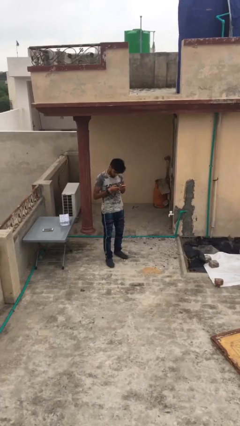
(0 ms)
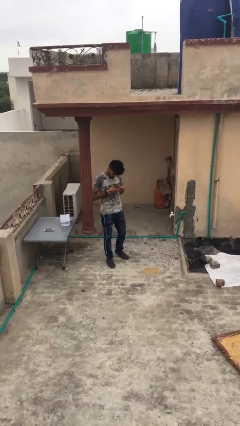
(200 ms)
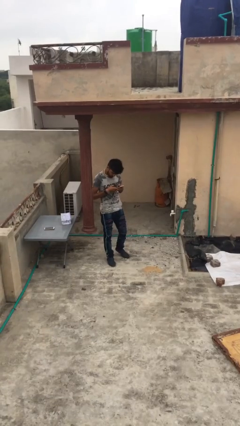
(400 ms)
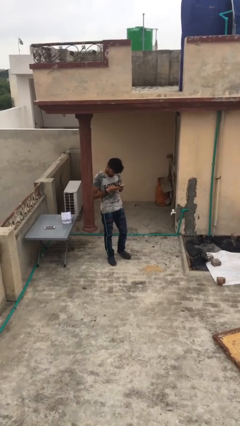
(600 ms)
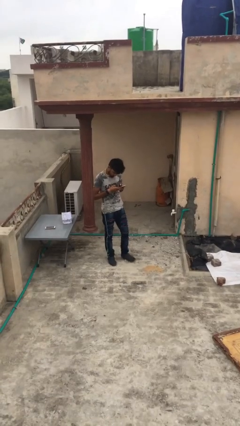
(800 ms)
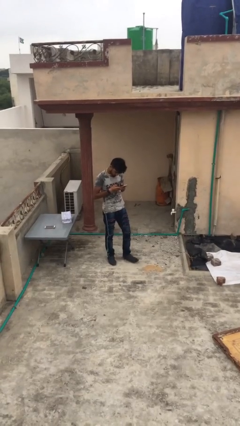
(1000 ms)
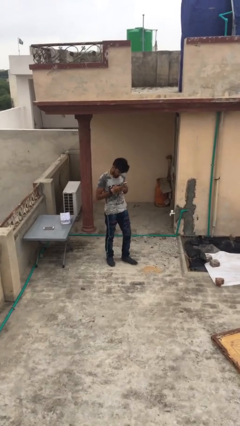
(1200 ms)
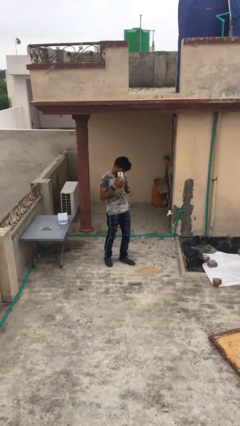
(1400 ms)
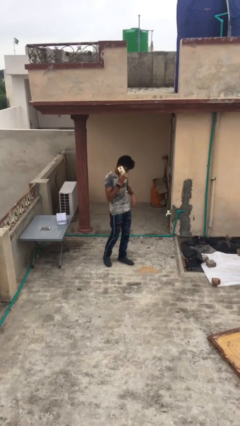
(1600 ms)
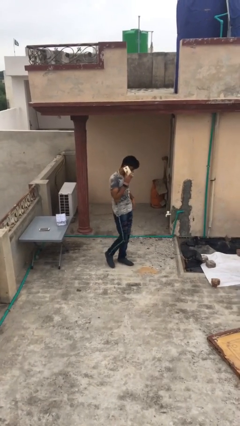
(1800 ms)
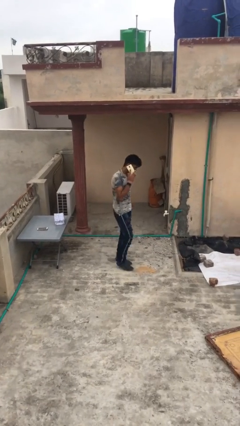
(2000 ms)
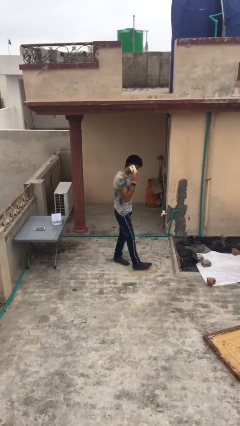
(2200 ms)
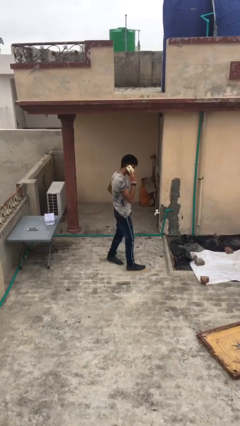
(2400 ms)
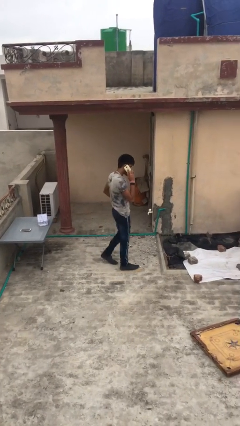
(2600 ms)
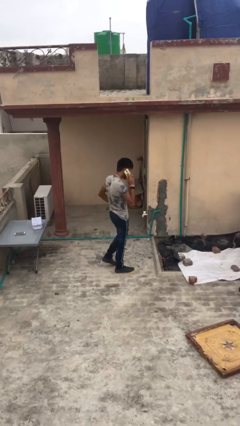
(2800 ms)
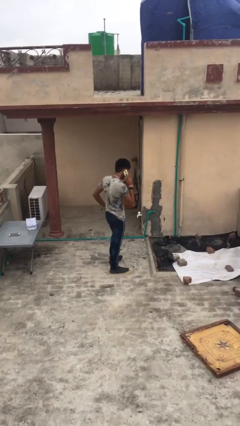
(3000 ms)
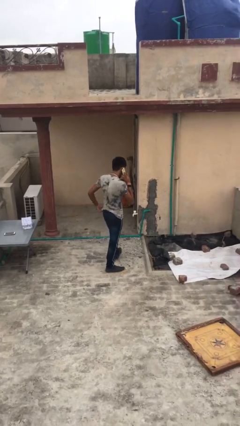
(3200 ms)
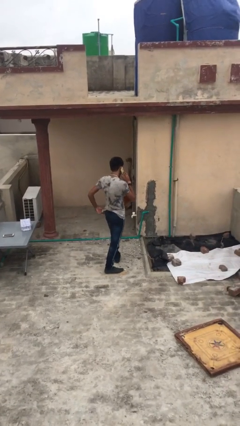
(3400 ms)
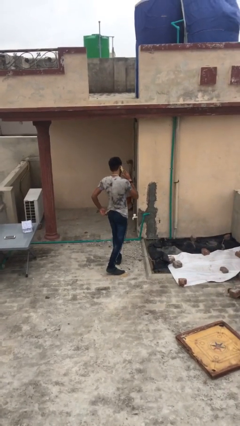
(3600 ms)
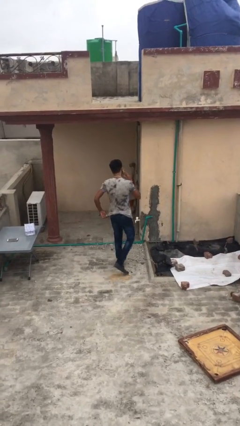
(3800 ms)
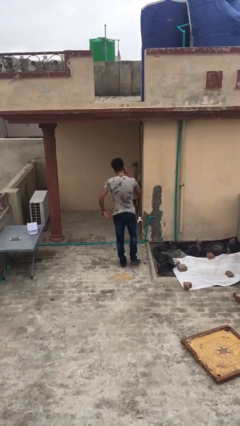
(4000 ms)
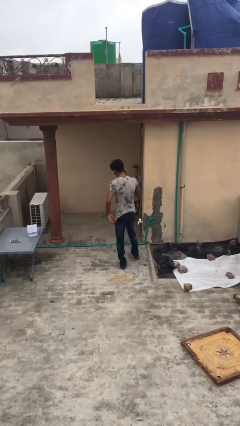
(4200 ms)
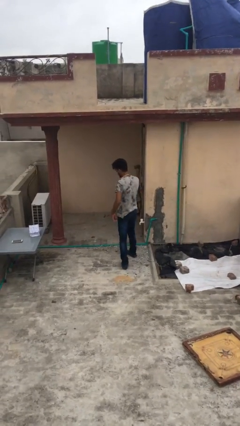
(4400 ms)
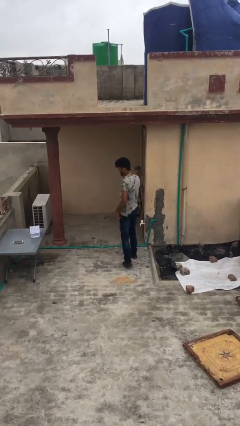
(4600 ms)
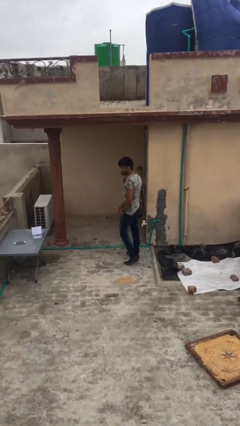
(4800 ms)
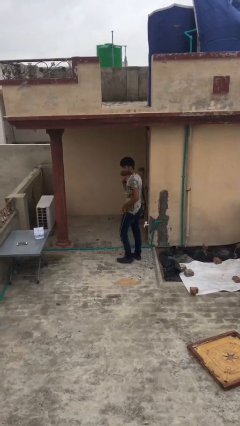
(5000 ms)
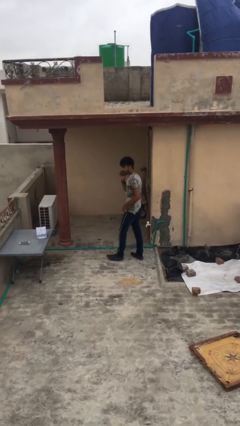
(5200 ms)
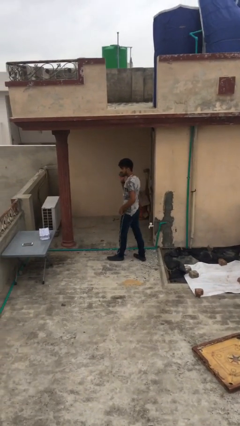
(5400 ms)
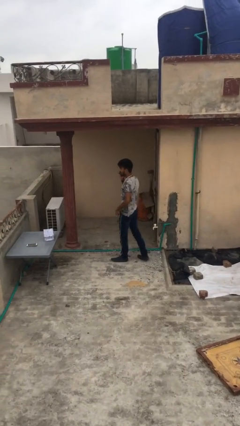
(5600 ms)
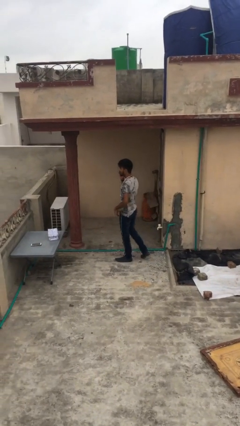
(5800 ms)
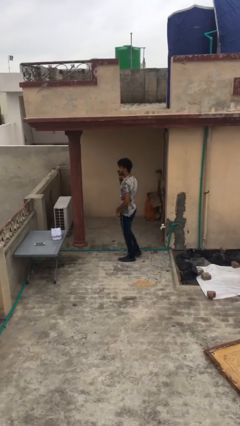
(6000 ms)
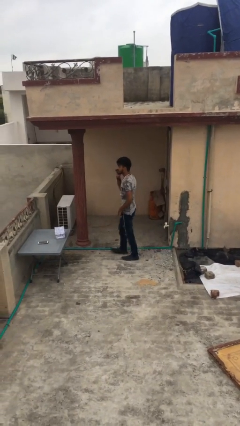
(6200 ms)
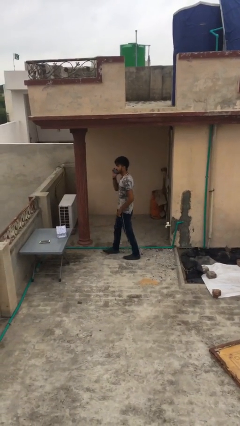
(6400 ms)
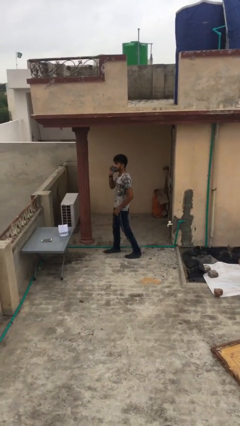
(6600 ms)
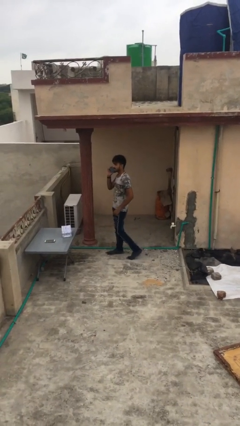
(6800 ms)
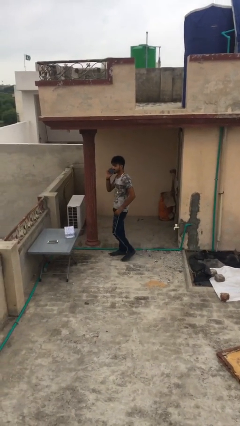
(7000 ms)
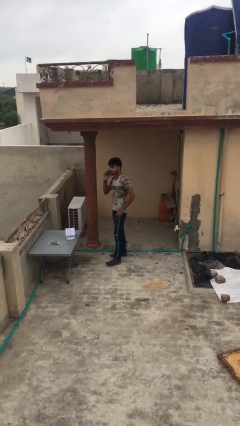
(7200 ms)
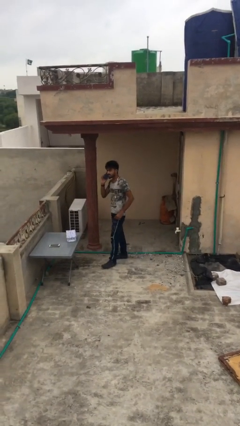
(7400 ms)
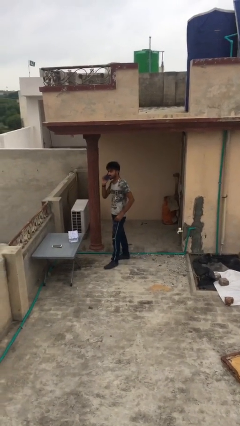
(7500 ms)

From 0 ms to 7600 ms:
person talks on phone

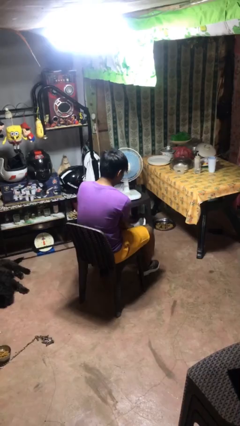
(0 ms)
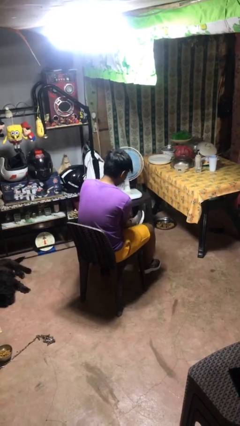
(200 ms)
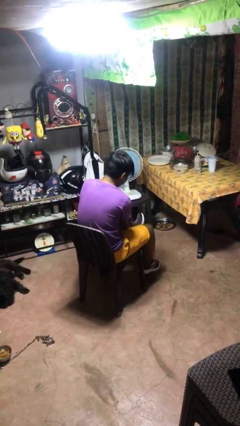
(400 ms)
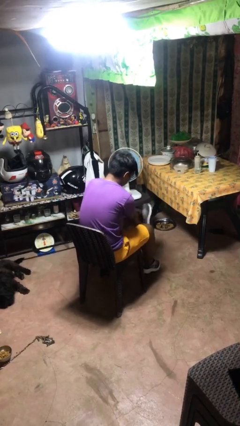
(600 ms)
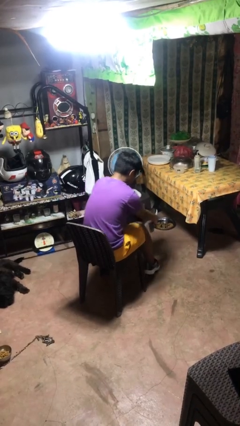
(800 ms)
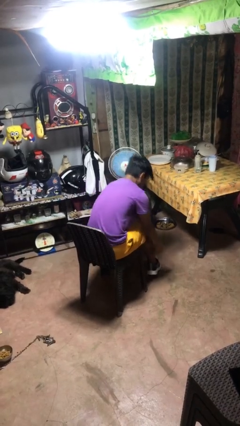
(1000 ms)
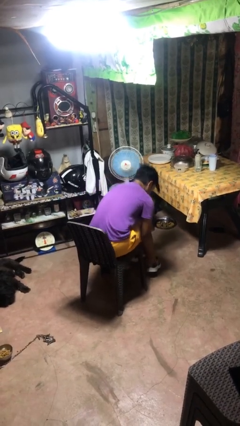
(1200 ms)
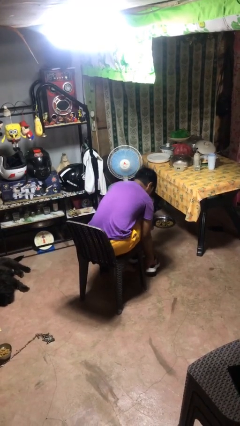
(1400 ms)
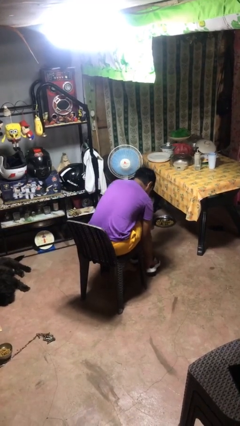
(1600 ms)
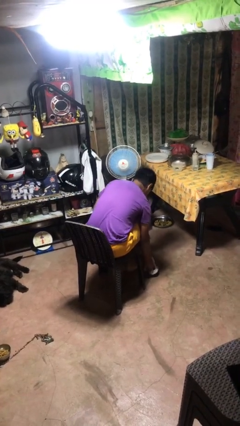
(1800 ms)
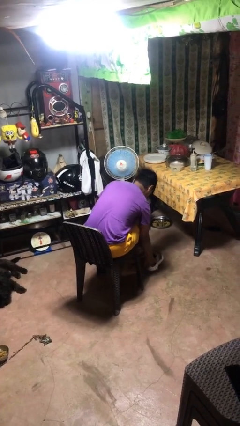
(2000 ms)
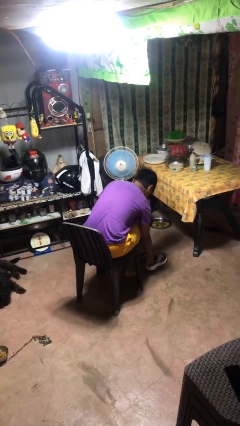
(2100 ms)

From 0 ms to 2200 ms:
person takes off shoes

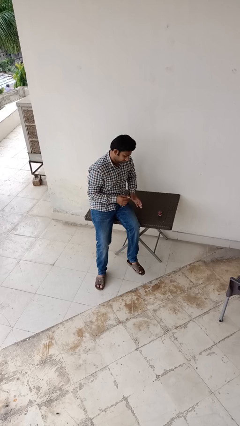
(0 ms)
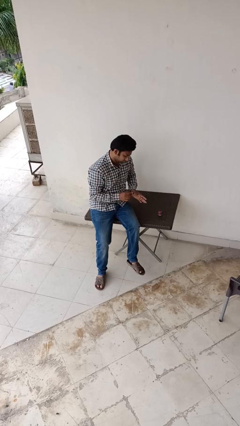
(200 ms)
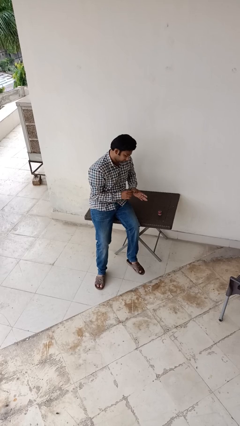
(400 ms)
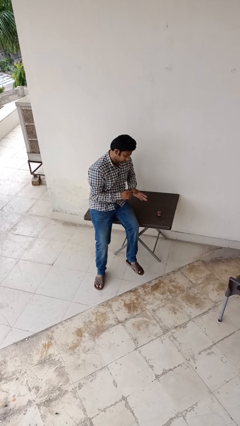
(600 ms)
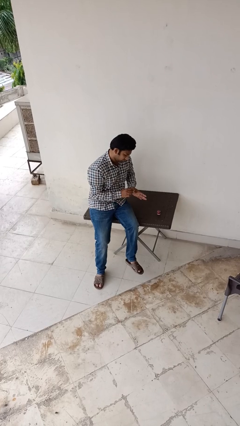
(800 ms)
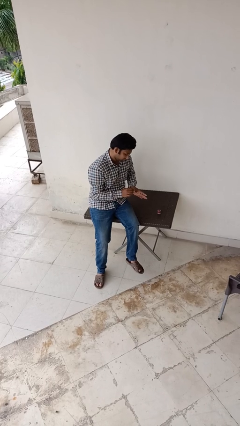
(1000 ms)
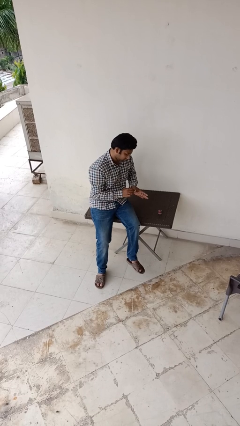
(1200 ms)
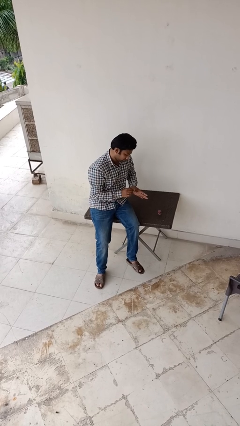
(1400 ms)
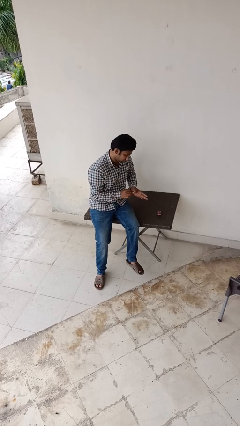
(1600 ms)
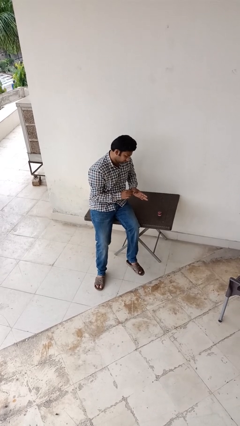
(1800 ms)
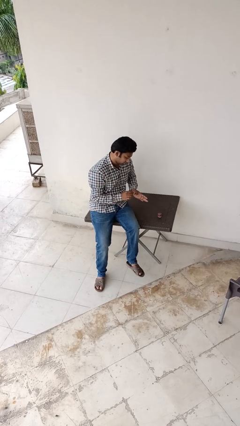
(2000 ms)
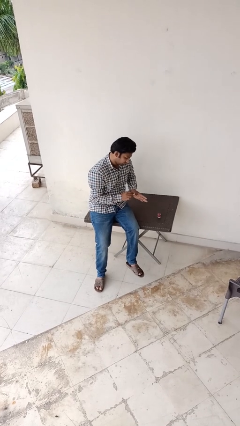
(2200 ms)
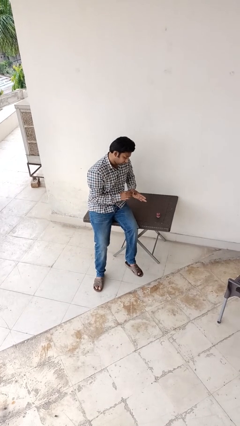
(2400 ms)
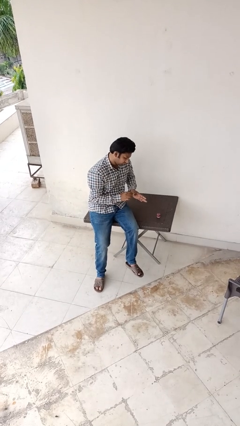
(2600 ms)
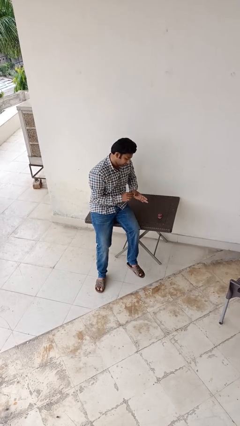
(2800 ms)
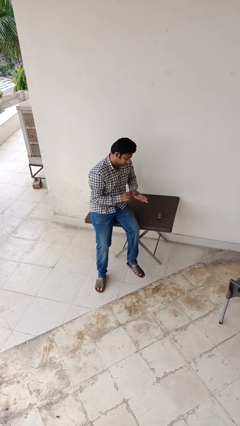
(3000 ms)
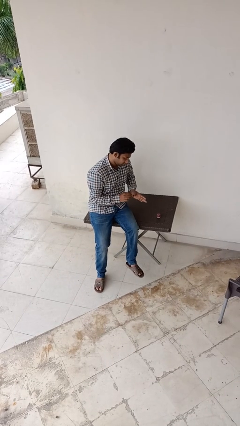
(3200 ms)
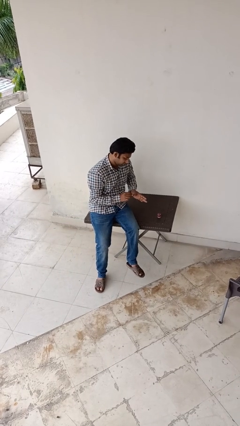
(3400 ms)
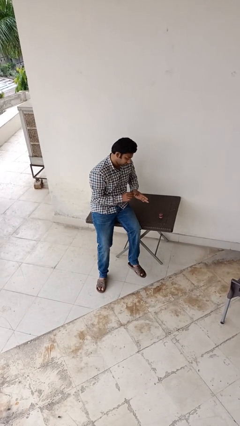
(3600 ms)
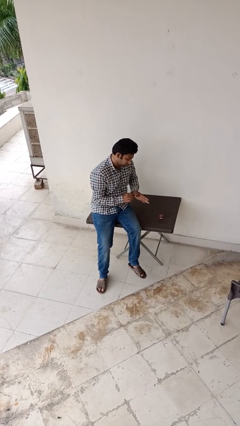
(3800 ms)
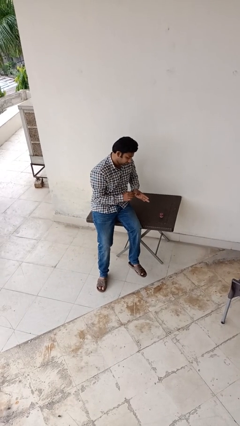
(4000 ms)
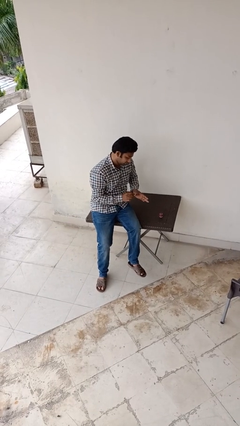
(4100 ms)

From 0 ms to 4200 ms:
person paints fingernails

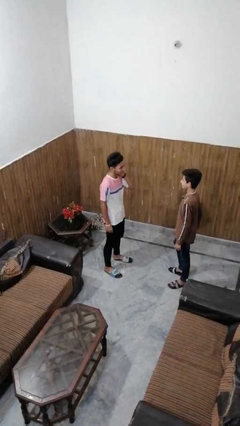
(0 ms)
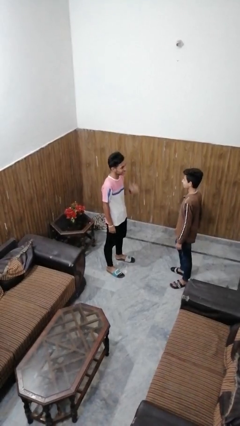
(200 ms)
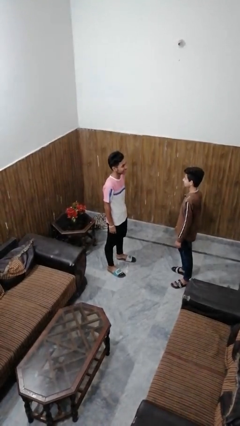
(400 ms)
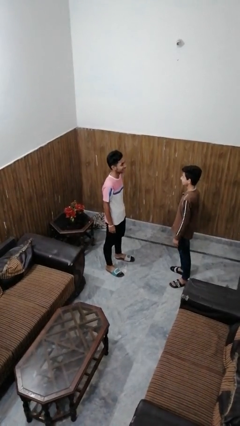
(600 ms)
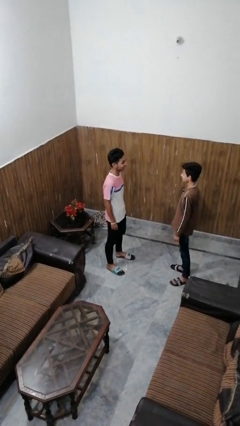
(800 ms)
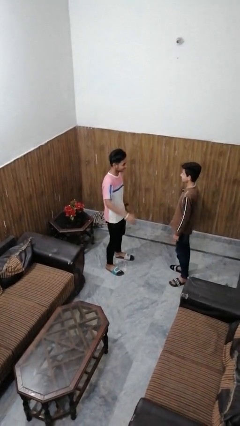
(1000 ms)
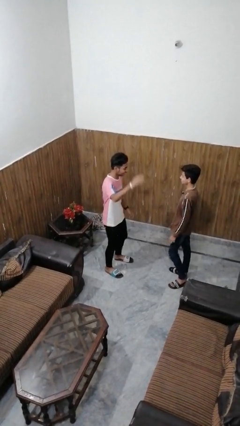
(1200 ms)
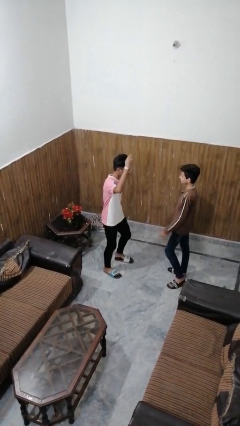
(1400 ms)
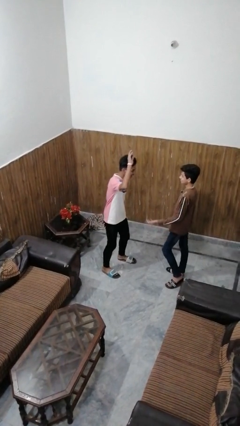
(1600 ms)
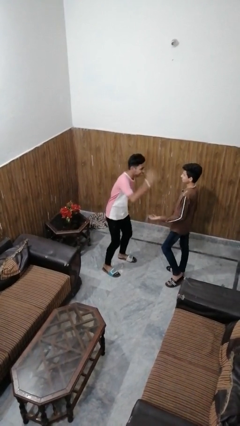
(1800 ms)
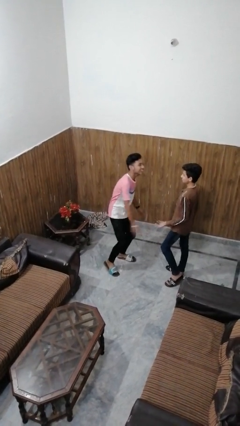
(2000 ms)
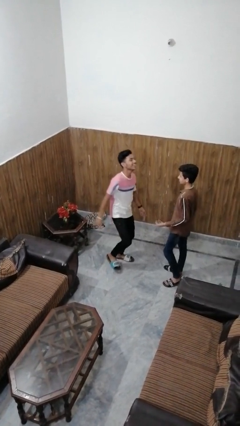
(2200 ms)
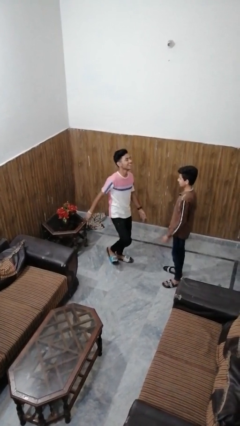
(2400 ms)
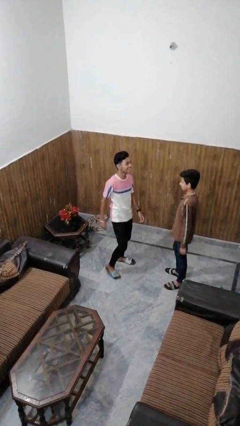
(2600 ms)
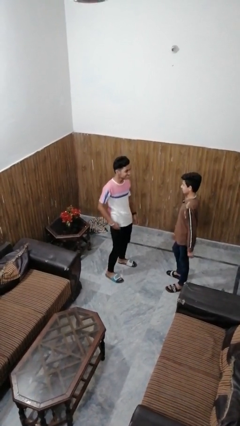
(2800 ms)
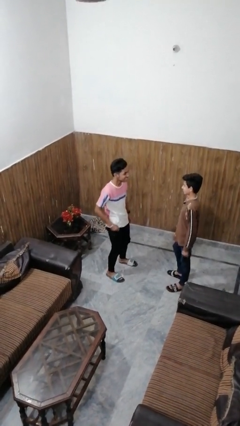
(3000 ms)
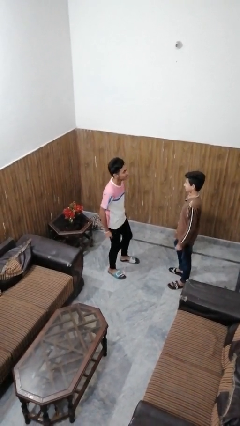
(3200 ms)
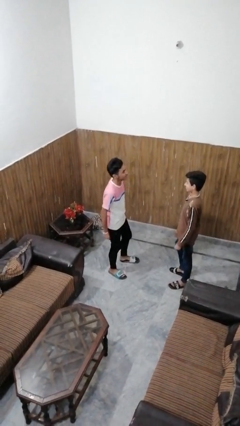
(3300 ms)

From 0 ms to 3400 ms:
person laughs with person

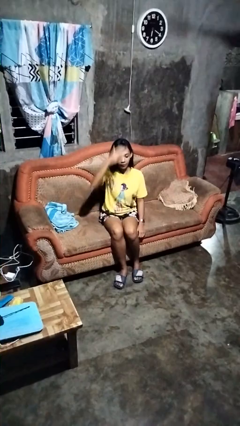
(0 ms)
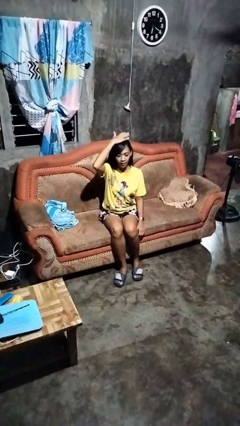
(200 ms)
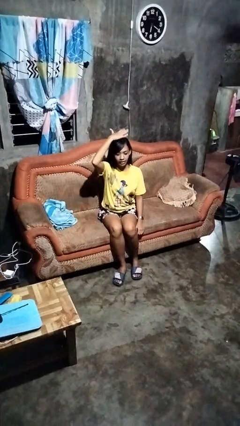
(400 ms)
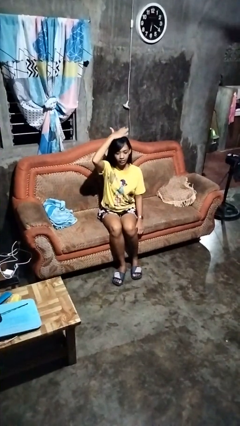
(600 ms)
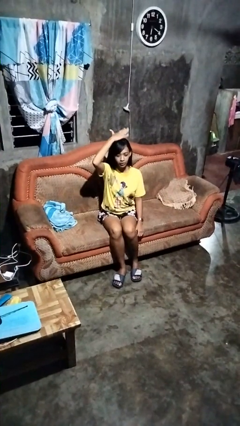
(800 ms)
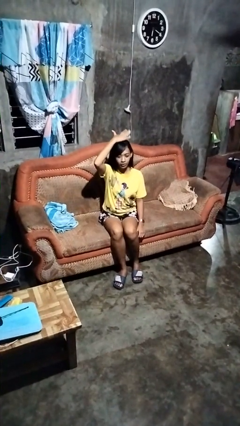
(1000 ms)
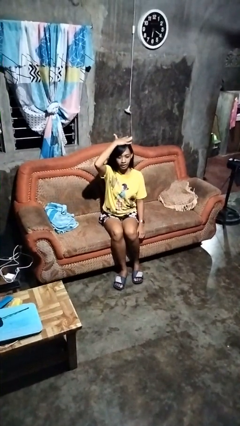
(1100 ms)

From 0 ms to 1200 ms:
person pats head
